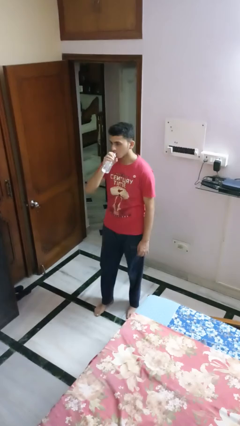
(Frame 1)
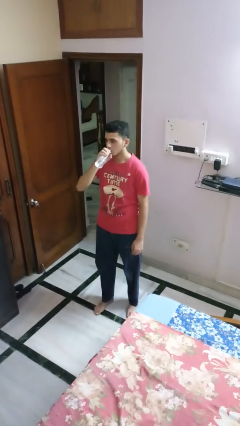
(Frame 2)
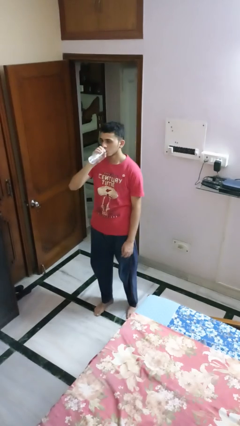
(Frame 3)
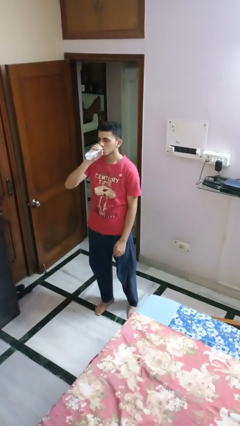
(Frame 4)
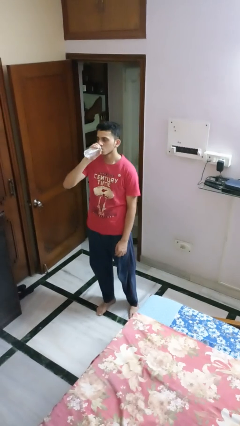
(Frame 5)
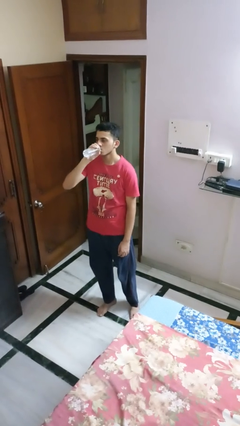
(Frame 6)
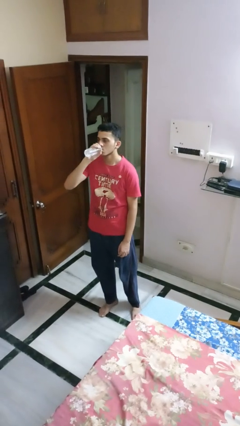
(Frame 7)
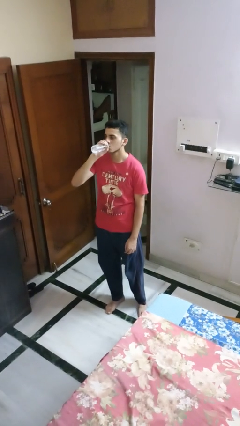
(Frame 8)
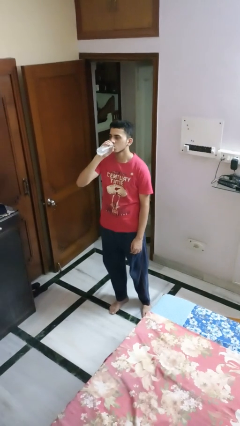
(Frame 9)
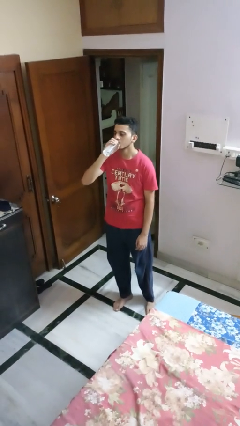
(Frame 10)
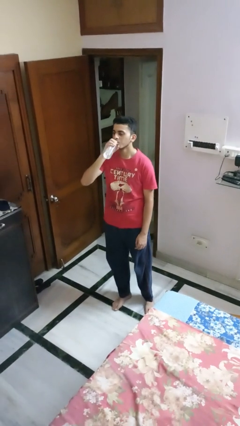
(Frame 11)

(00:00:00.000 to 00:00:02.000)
person drinks from bottle

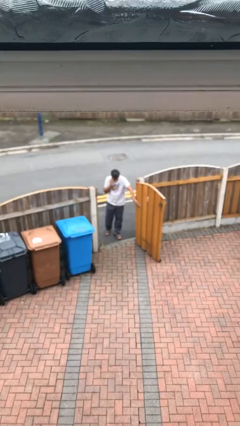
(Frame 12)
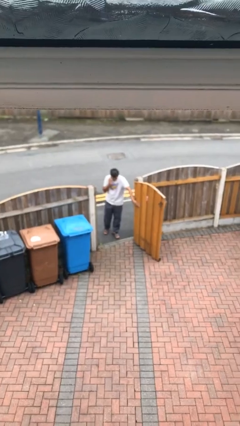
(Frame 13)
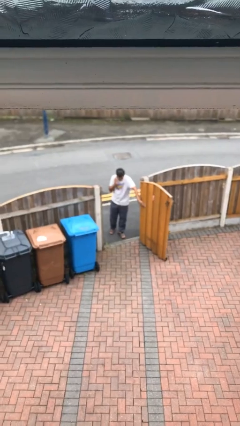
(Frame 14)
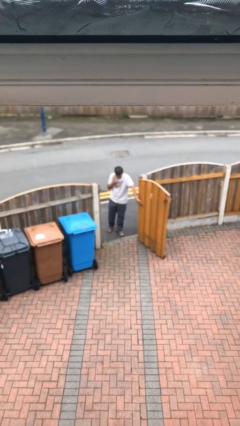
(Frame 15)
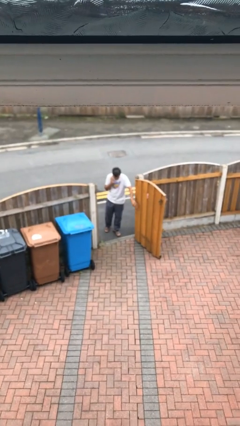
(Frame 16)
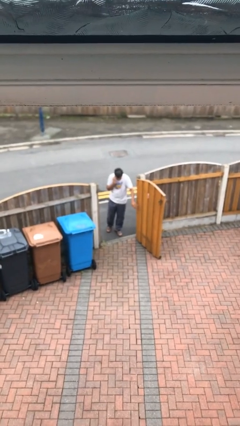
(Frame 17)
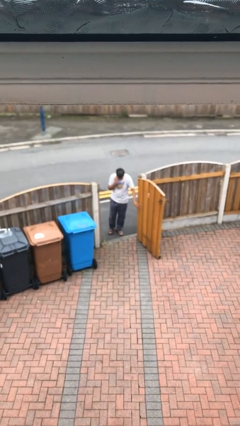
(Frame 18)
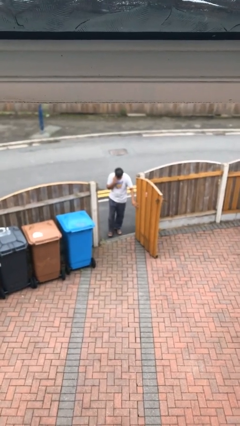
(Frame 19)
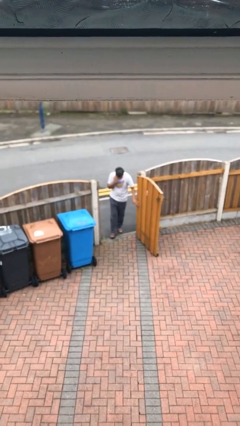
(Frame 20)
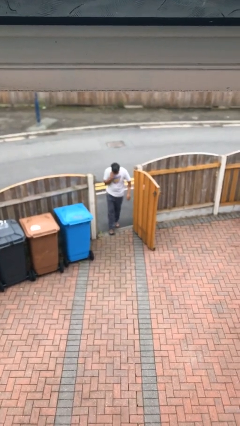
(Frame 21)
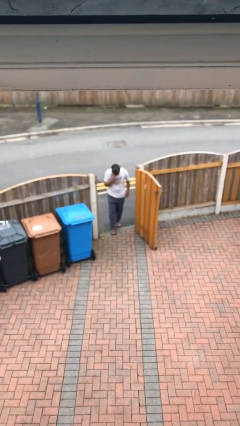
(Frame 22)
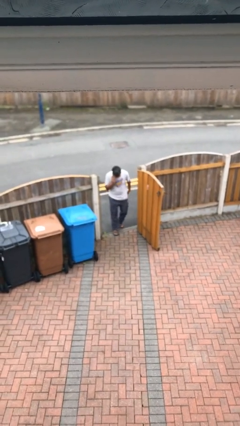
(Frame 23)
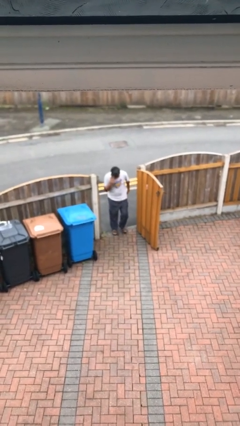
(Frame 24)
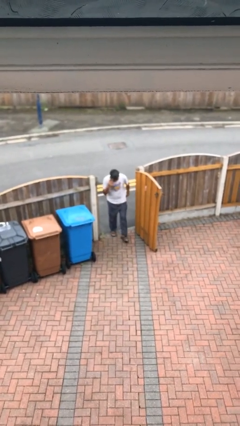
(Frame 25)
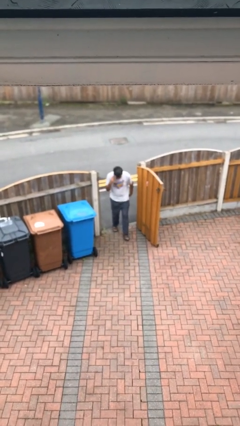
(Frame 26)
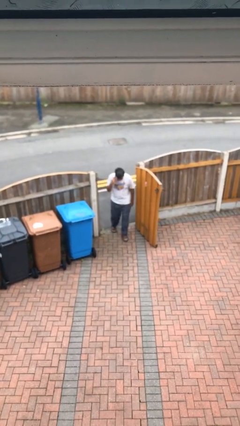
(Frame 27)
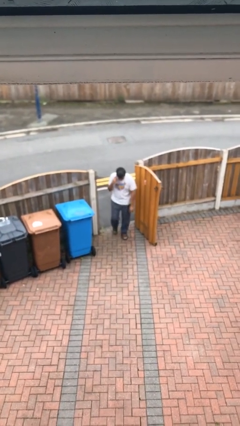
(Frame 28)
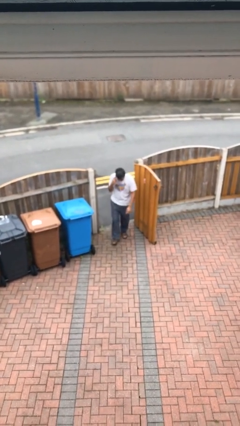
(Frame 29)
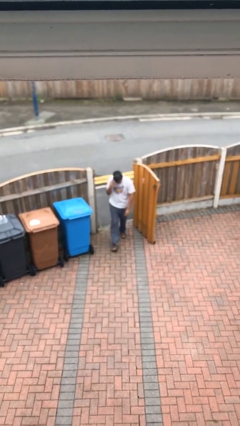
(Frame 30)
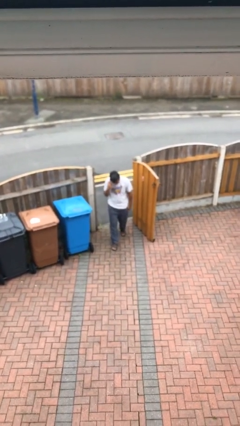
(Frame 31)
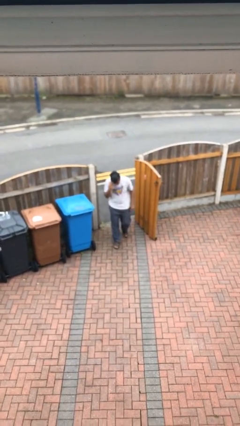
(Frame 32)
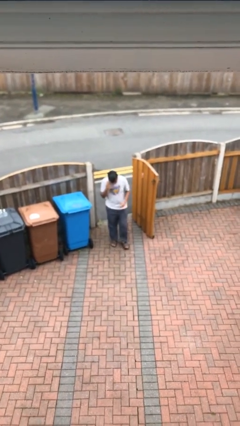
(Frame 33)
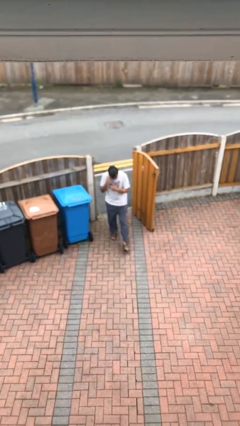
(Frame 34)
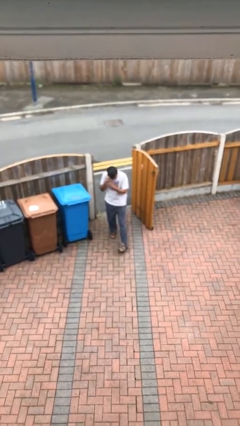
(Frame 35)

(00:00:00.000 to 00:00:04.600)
person enters scene through structure

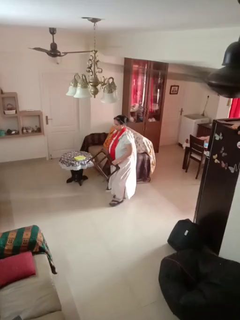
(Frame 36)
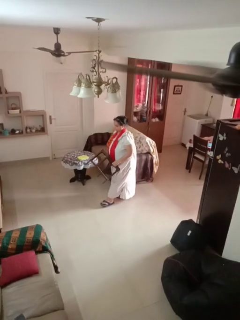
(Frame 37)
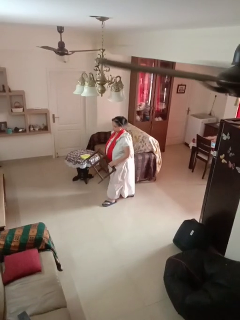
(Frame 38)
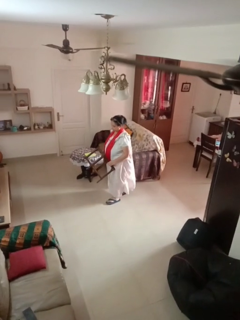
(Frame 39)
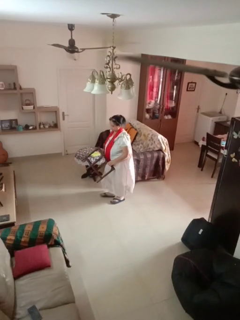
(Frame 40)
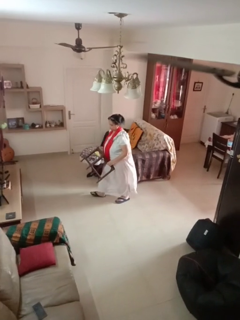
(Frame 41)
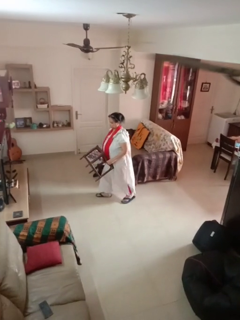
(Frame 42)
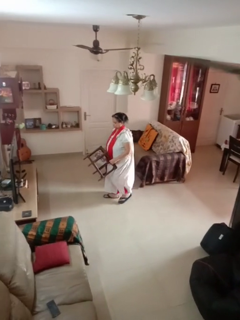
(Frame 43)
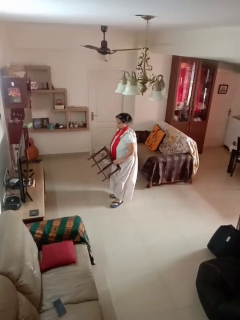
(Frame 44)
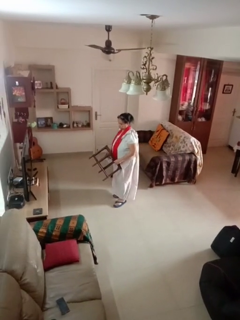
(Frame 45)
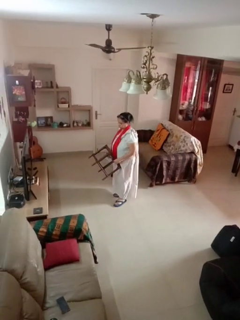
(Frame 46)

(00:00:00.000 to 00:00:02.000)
person carries furniture

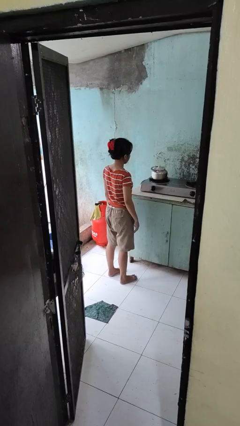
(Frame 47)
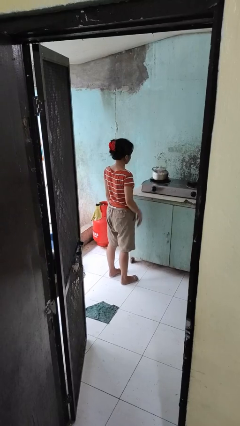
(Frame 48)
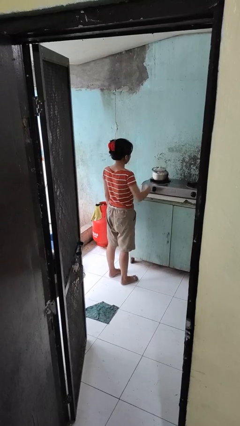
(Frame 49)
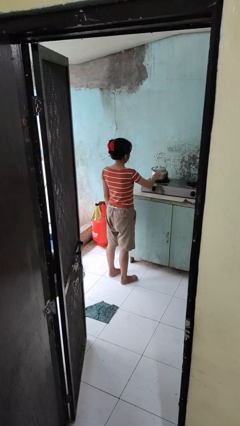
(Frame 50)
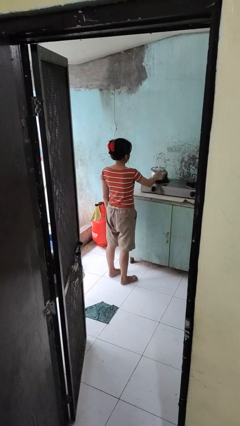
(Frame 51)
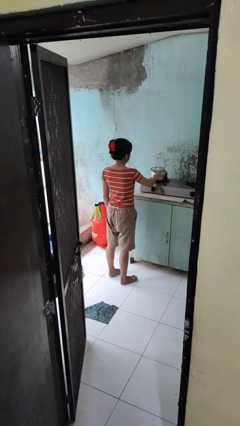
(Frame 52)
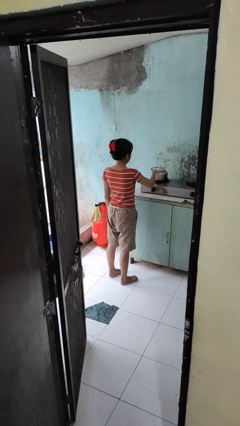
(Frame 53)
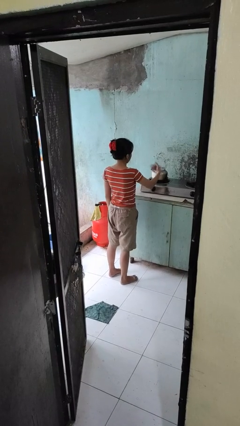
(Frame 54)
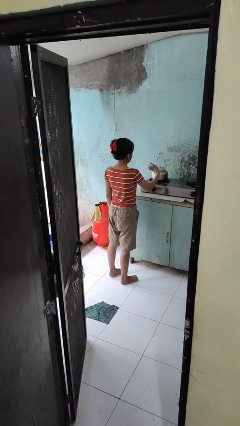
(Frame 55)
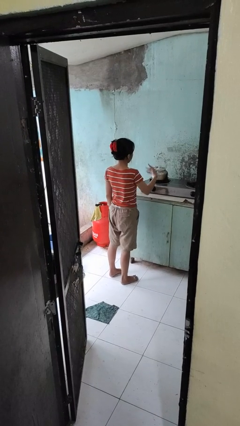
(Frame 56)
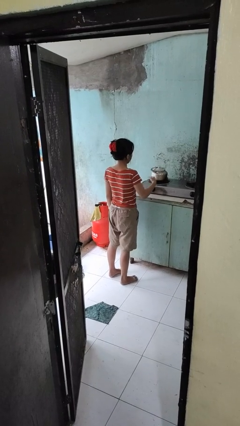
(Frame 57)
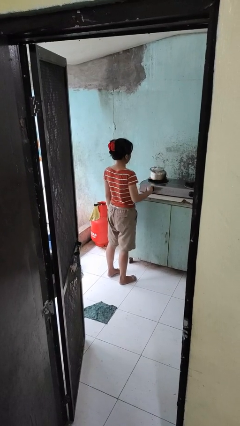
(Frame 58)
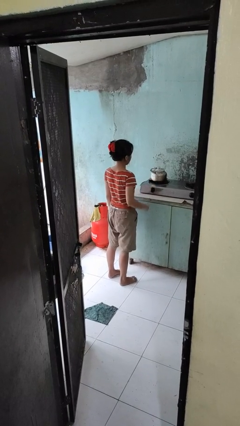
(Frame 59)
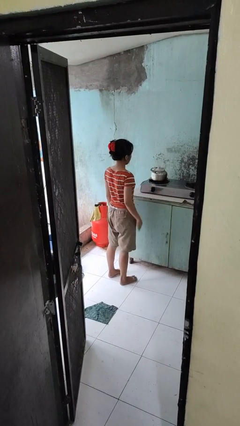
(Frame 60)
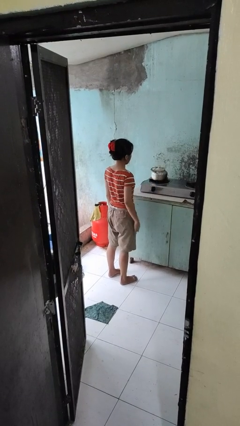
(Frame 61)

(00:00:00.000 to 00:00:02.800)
person burns hand

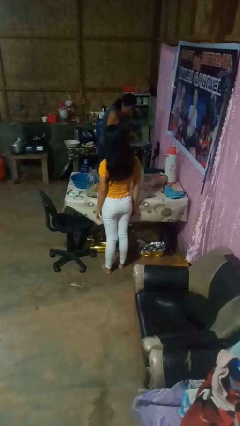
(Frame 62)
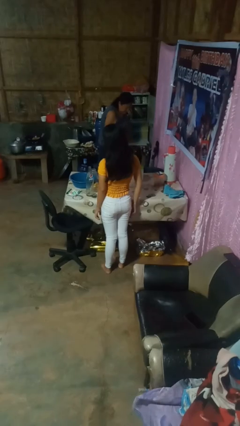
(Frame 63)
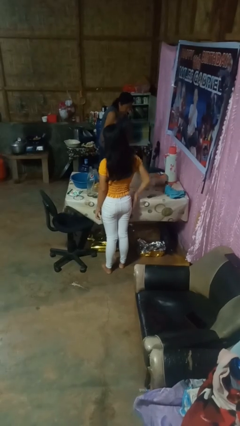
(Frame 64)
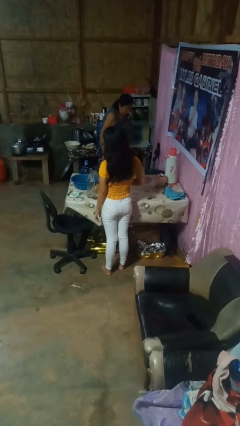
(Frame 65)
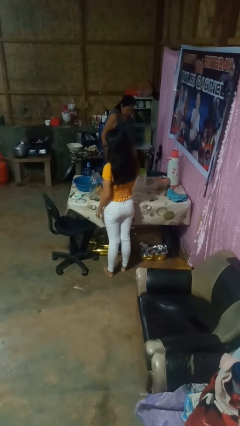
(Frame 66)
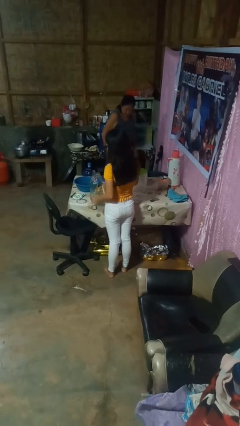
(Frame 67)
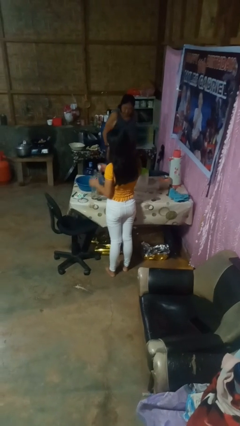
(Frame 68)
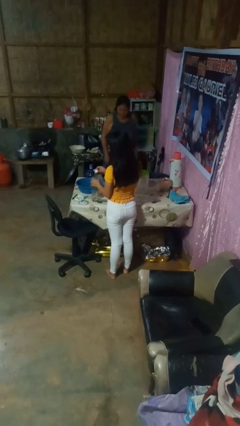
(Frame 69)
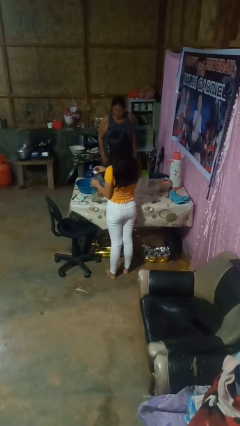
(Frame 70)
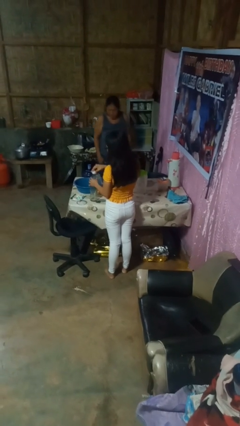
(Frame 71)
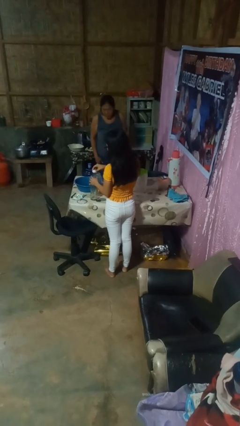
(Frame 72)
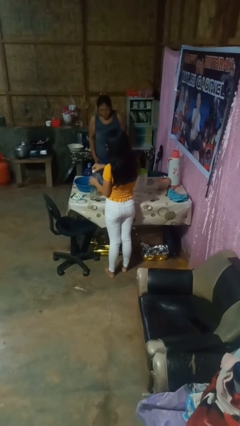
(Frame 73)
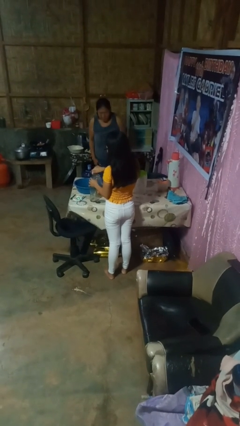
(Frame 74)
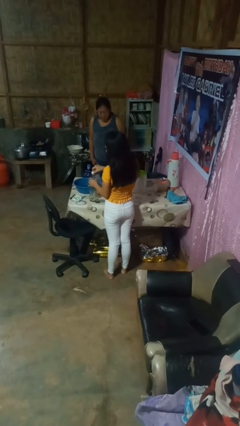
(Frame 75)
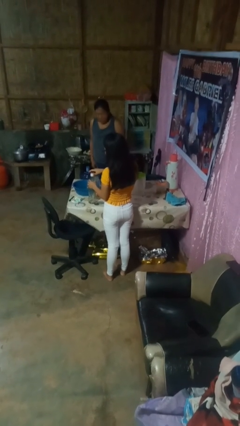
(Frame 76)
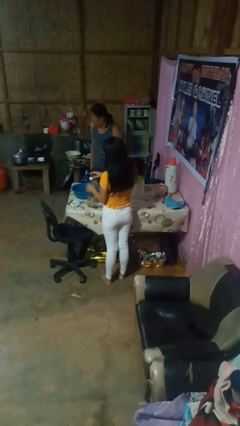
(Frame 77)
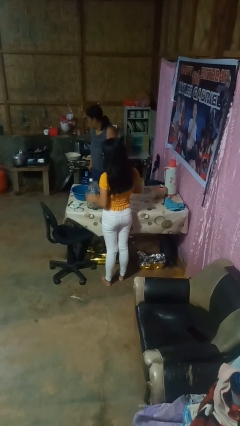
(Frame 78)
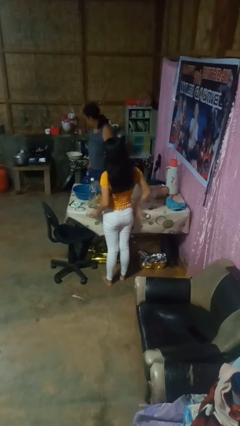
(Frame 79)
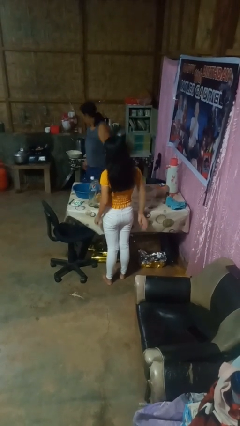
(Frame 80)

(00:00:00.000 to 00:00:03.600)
person screws lid to bottle

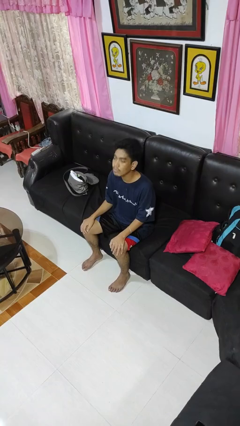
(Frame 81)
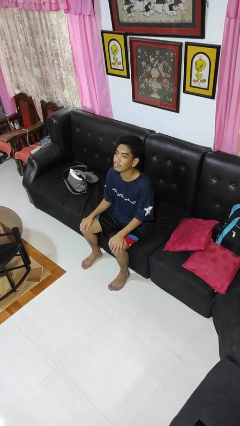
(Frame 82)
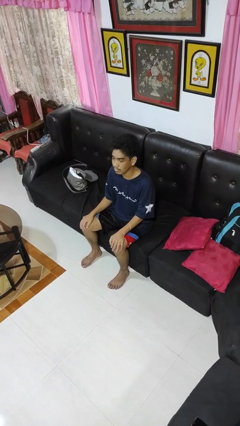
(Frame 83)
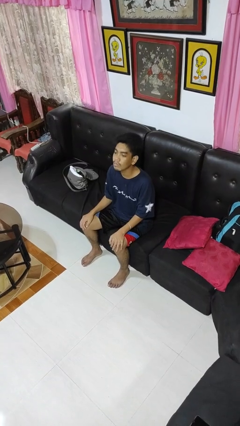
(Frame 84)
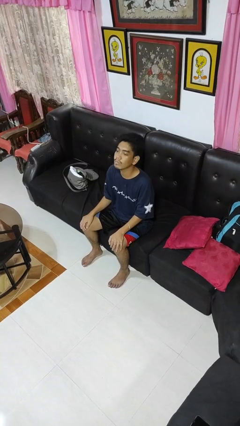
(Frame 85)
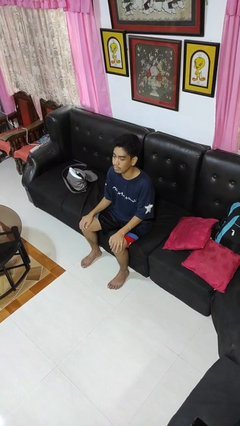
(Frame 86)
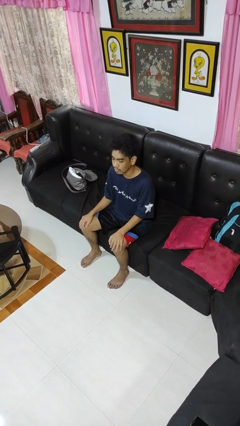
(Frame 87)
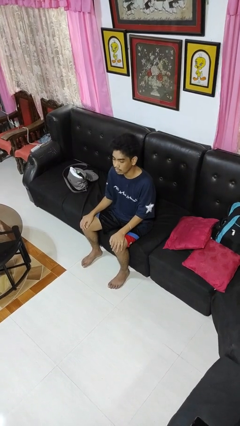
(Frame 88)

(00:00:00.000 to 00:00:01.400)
person nods head

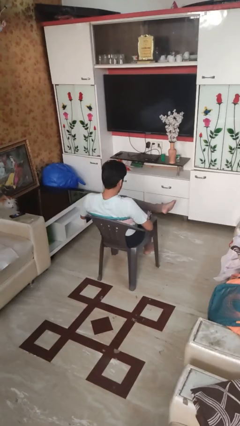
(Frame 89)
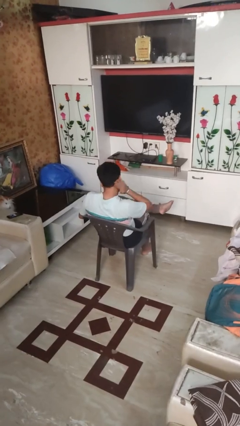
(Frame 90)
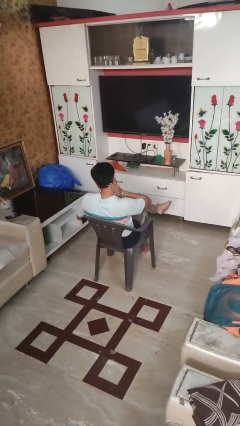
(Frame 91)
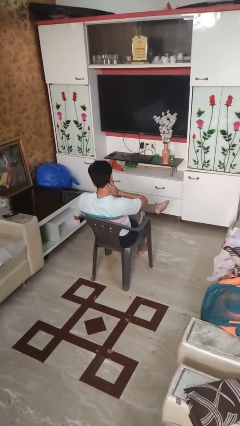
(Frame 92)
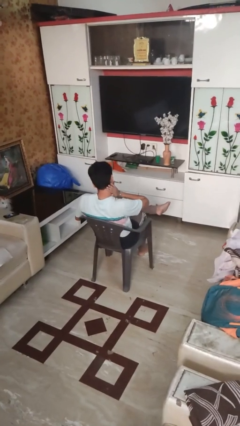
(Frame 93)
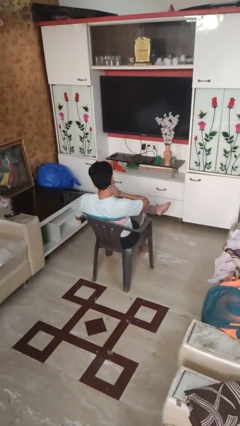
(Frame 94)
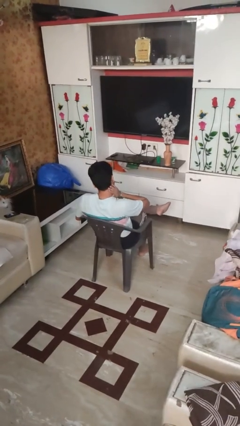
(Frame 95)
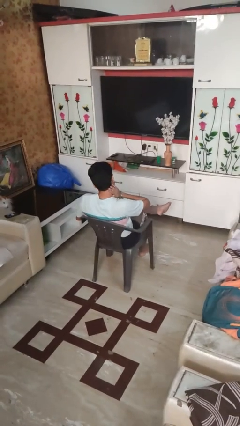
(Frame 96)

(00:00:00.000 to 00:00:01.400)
person swats bug
